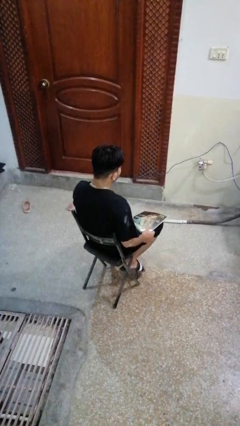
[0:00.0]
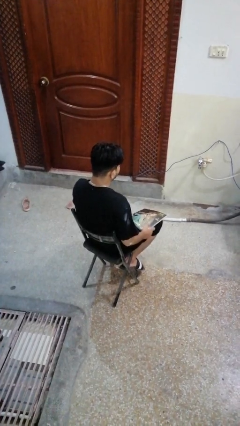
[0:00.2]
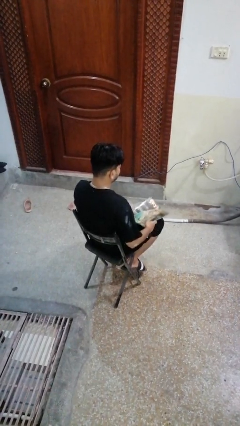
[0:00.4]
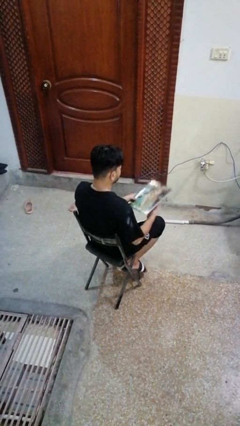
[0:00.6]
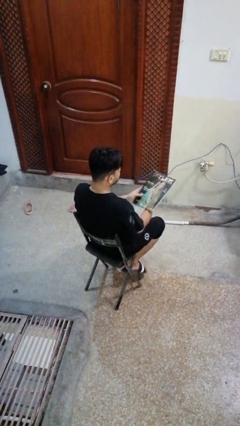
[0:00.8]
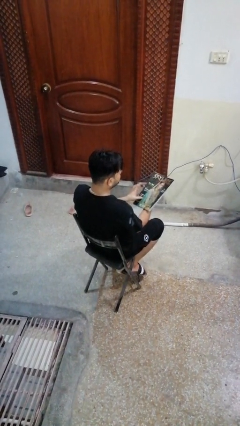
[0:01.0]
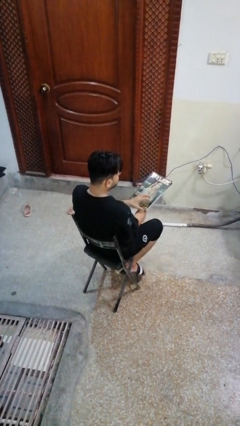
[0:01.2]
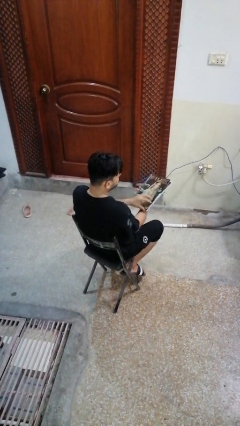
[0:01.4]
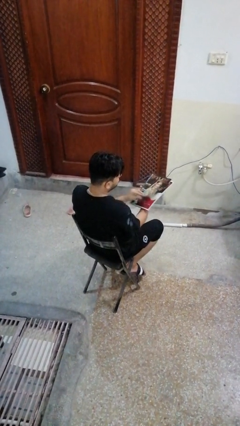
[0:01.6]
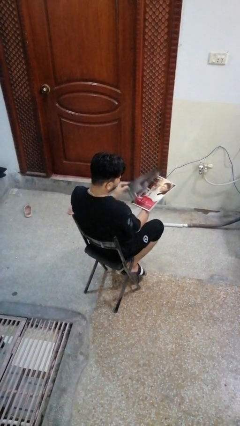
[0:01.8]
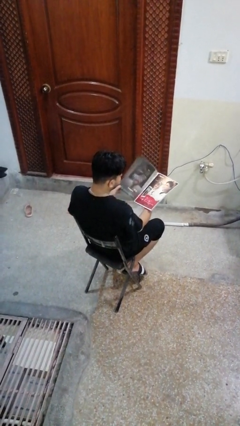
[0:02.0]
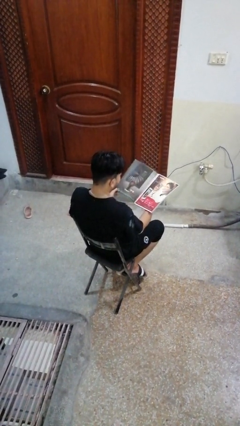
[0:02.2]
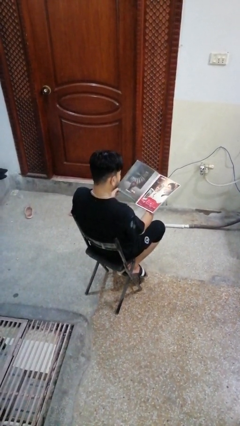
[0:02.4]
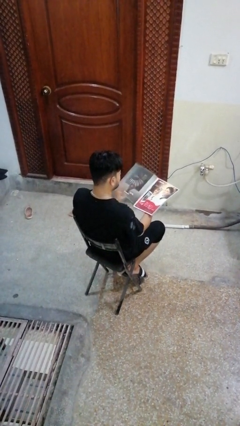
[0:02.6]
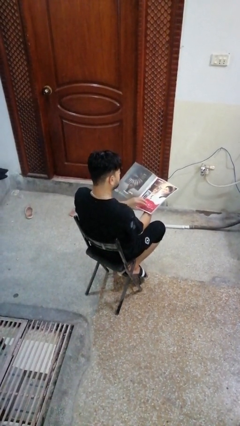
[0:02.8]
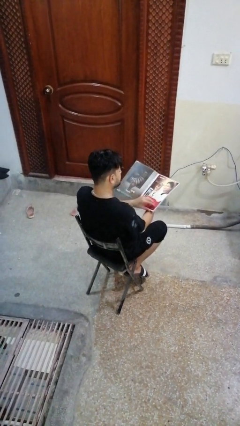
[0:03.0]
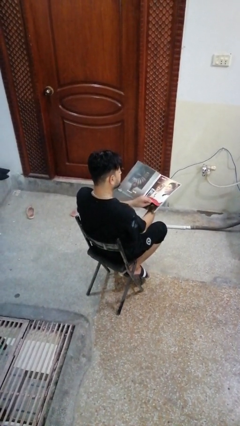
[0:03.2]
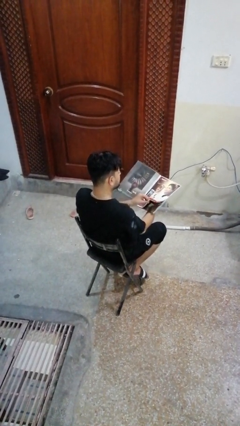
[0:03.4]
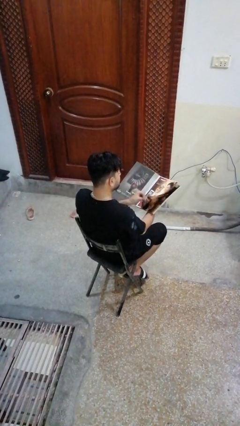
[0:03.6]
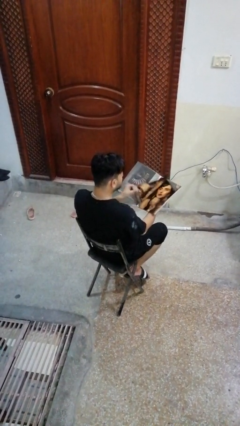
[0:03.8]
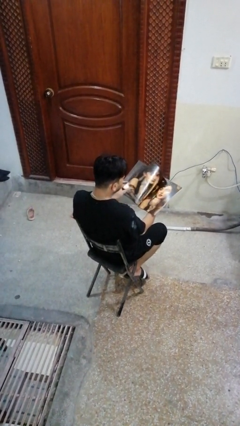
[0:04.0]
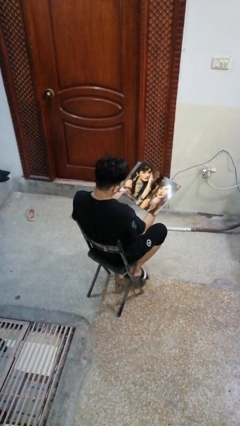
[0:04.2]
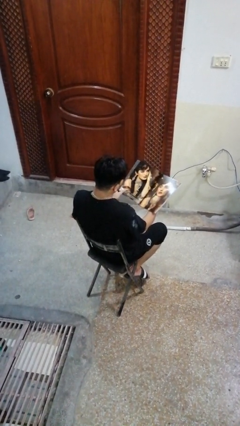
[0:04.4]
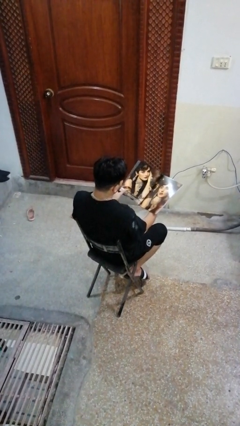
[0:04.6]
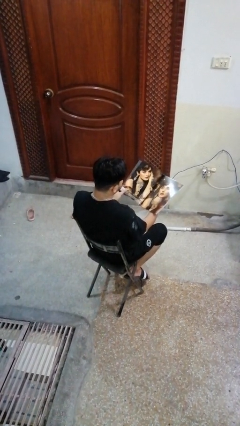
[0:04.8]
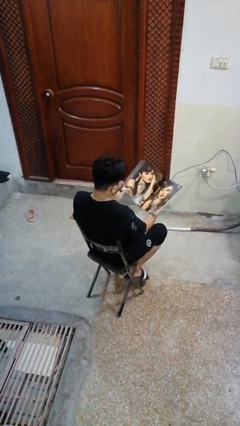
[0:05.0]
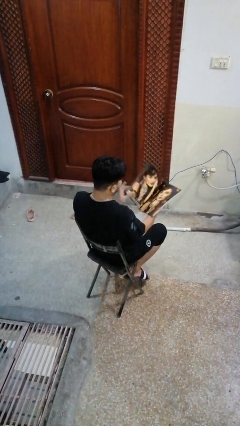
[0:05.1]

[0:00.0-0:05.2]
person reads magazine

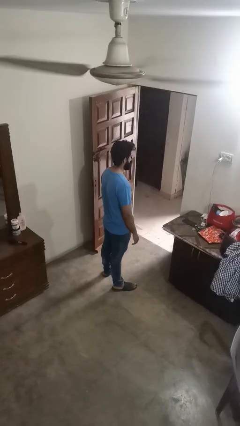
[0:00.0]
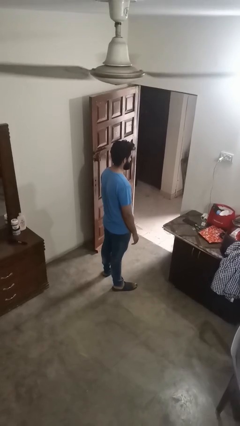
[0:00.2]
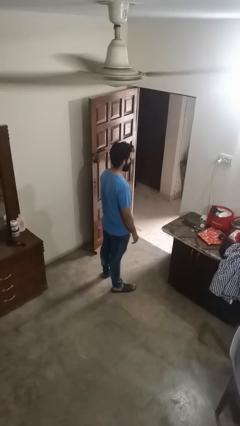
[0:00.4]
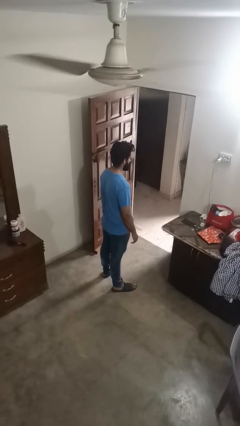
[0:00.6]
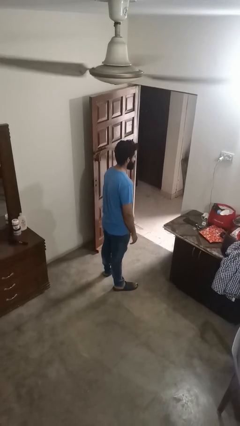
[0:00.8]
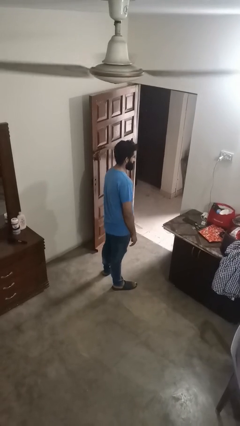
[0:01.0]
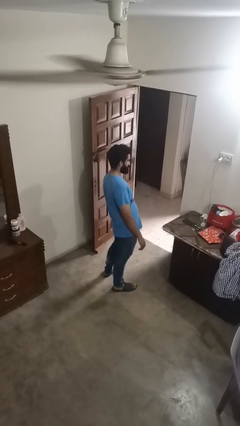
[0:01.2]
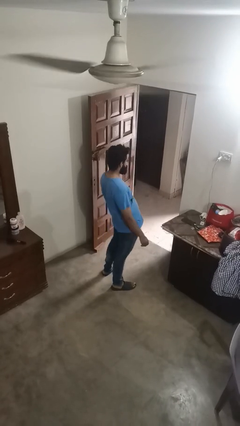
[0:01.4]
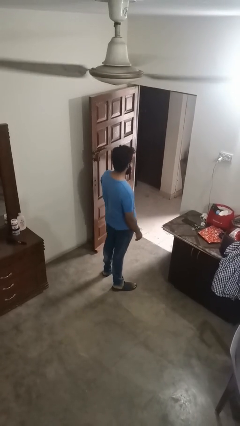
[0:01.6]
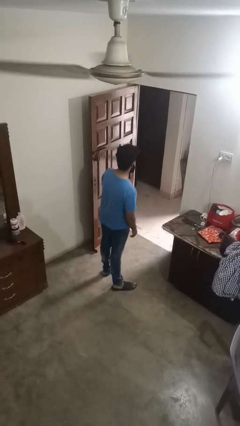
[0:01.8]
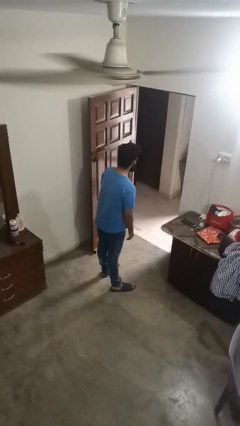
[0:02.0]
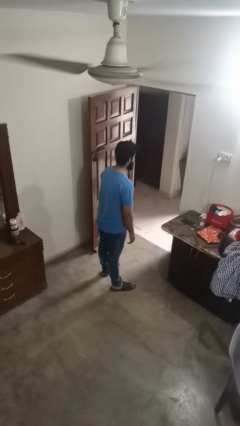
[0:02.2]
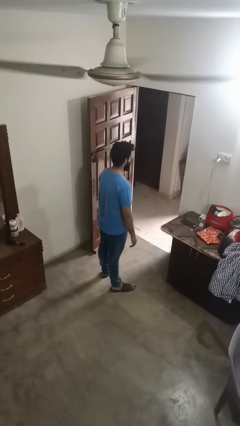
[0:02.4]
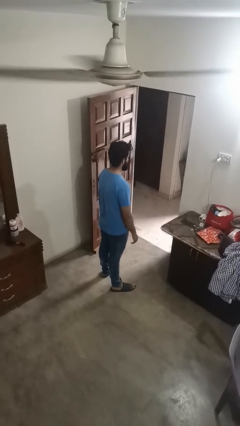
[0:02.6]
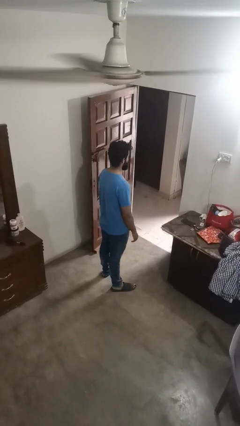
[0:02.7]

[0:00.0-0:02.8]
person wiggles hips

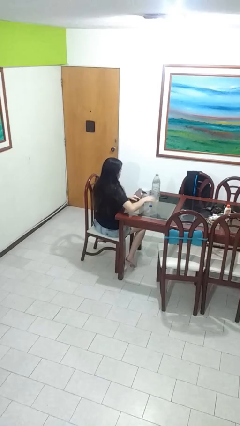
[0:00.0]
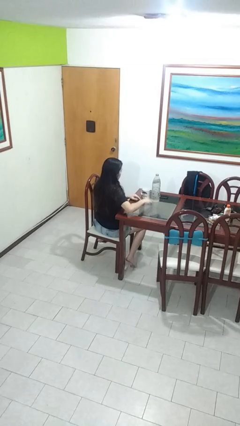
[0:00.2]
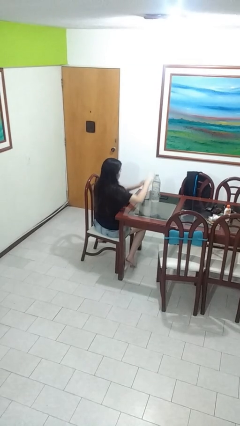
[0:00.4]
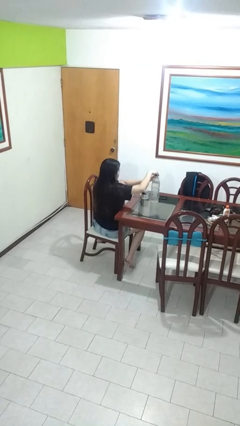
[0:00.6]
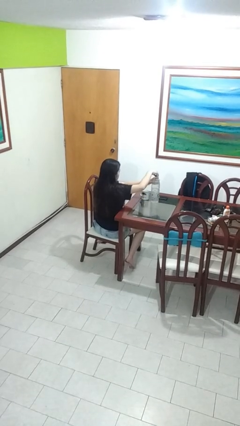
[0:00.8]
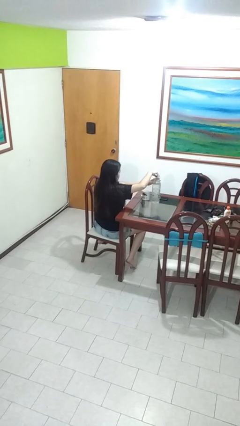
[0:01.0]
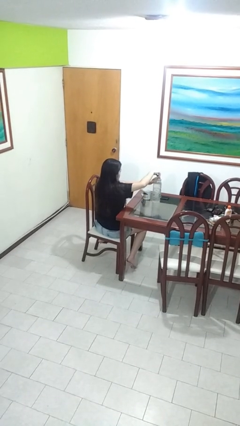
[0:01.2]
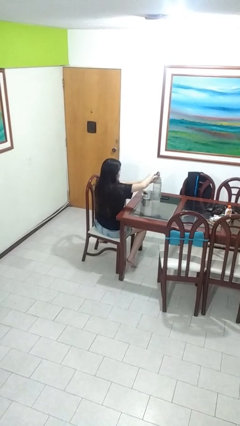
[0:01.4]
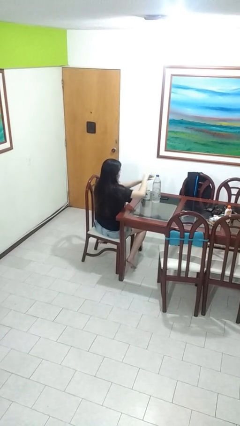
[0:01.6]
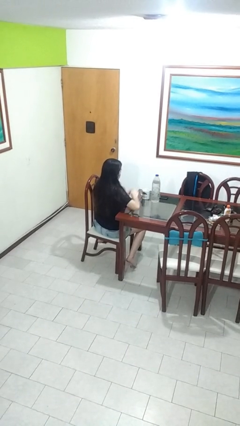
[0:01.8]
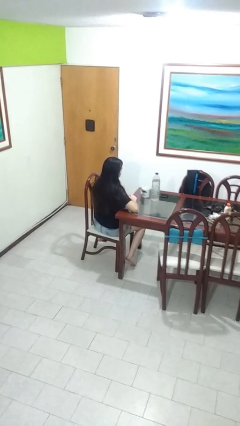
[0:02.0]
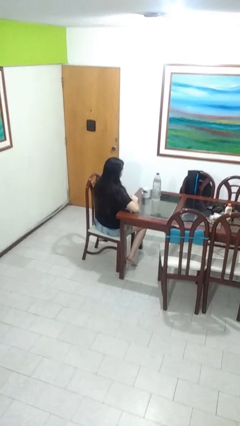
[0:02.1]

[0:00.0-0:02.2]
person screws lid to bottle

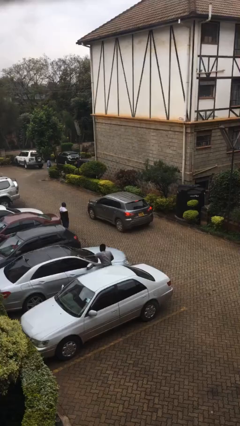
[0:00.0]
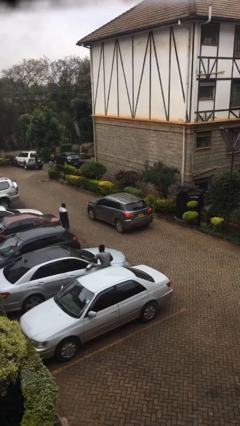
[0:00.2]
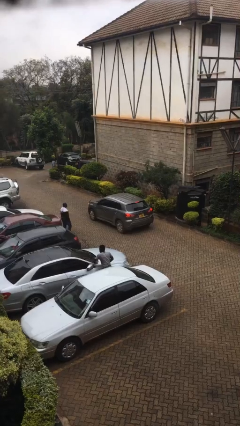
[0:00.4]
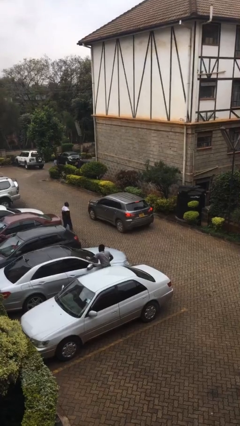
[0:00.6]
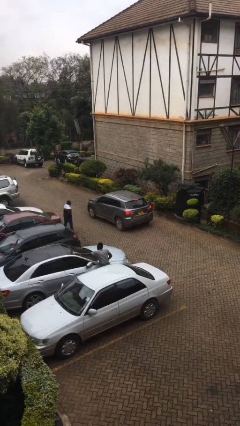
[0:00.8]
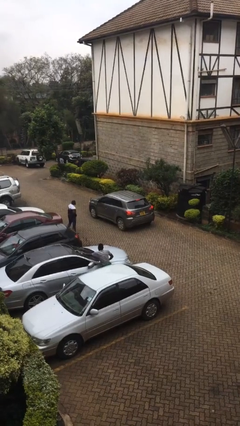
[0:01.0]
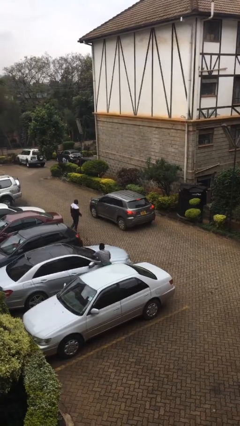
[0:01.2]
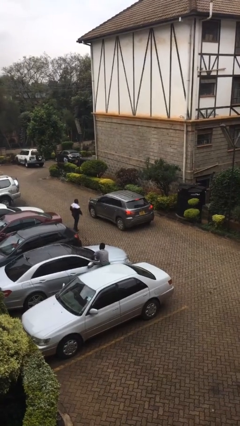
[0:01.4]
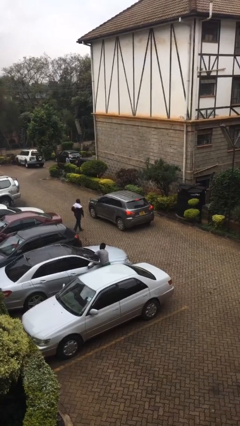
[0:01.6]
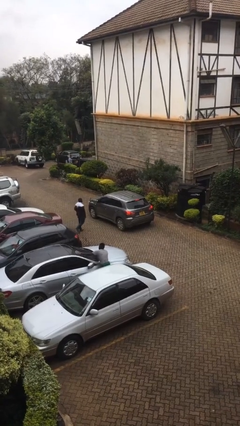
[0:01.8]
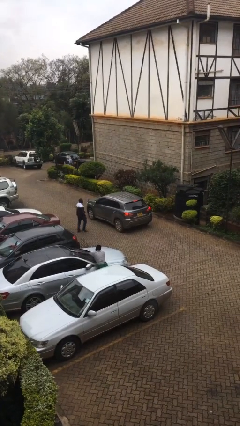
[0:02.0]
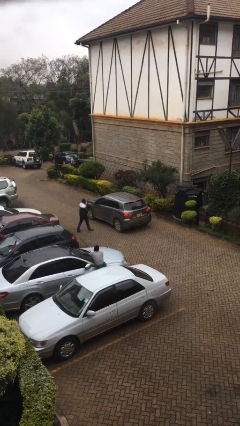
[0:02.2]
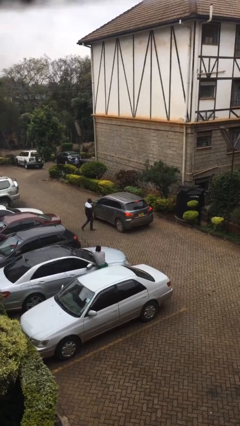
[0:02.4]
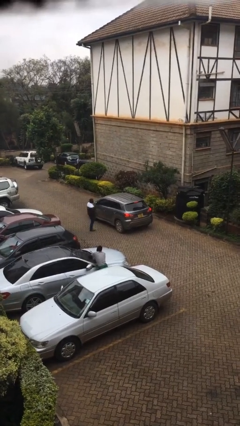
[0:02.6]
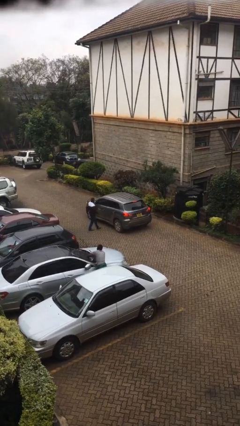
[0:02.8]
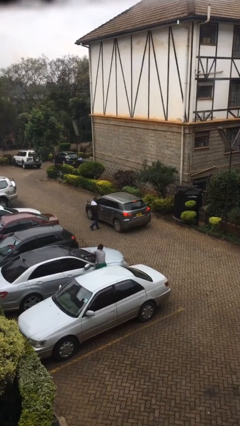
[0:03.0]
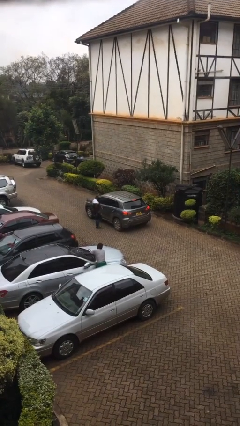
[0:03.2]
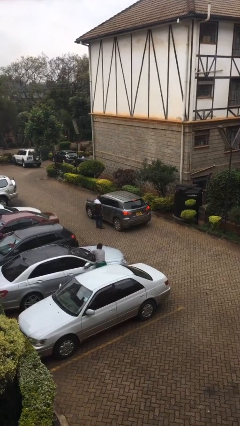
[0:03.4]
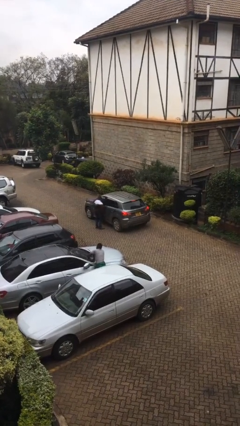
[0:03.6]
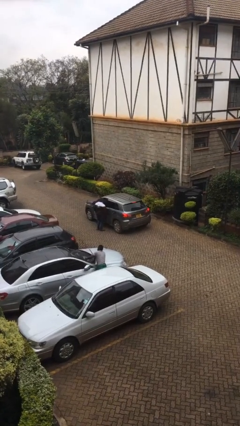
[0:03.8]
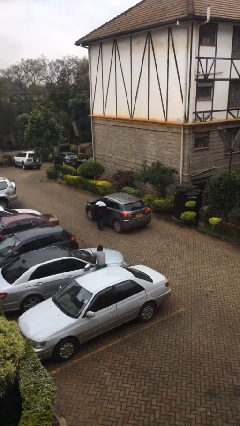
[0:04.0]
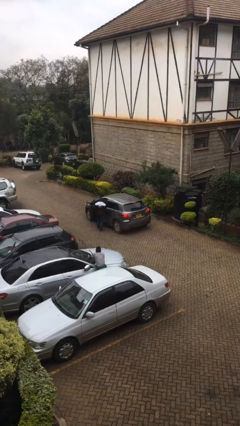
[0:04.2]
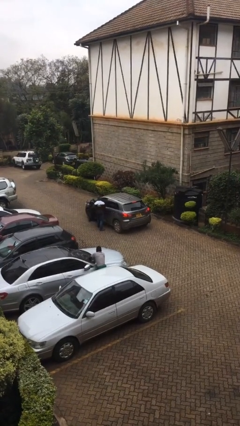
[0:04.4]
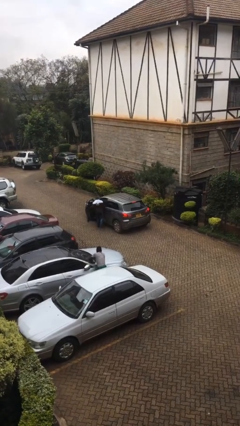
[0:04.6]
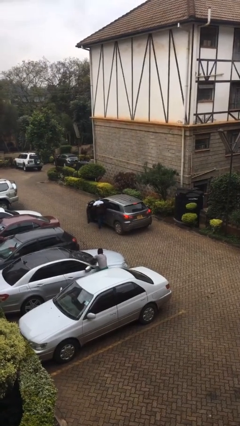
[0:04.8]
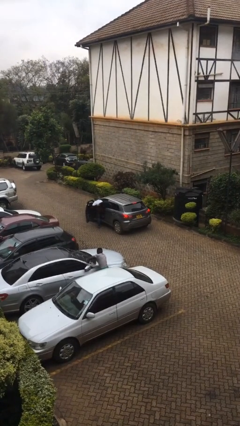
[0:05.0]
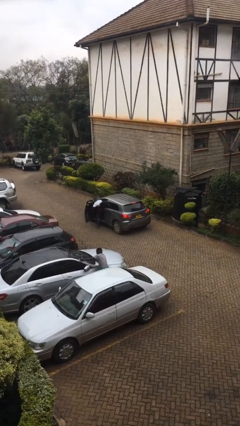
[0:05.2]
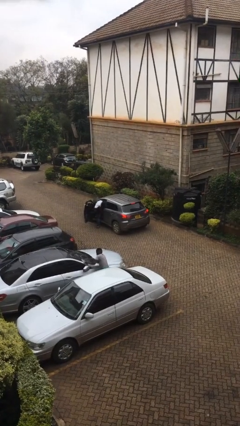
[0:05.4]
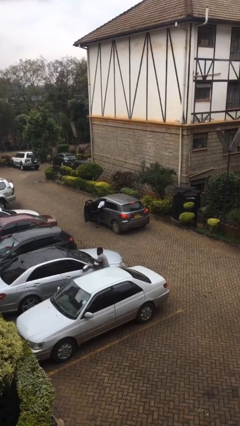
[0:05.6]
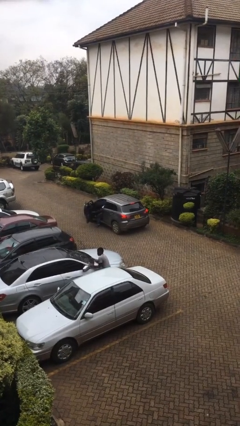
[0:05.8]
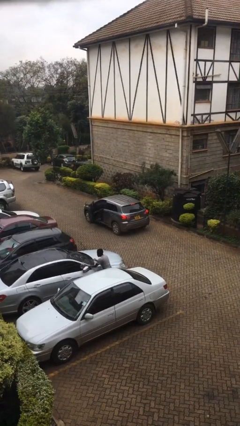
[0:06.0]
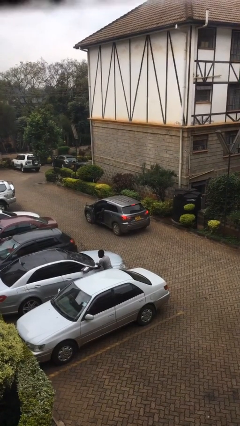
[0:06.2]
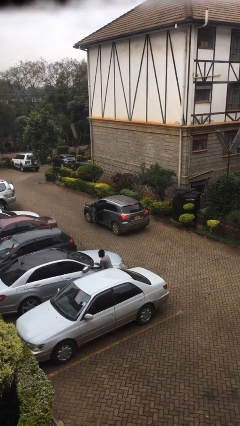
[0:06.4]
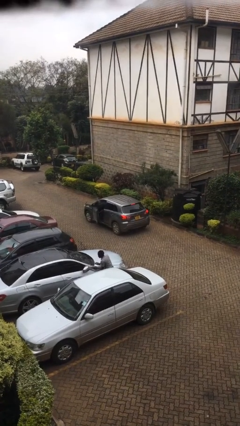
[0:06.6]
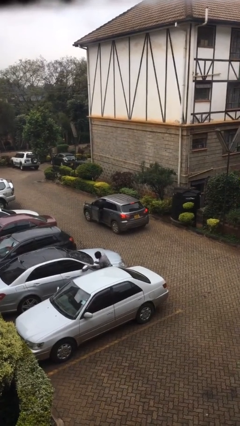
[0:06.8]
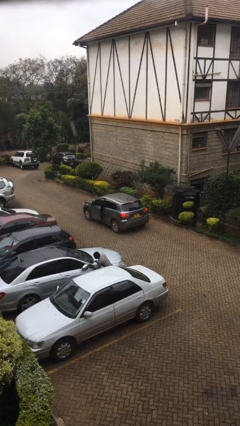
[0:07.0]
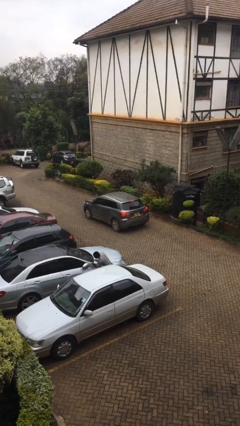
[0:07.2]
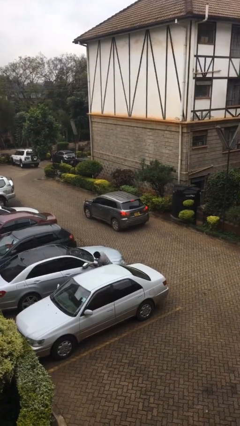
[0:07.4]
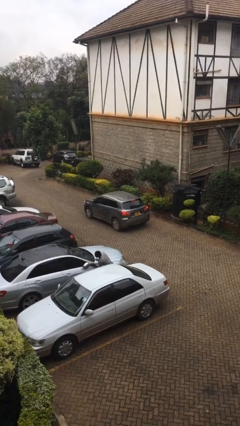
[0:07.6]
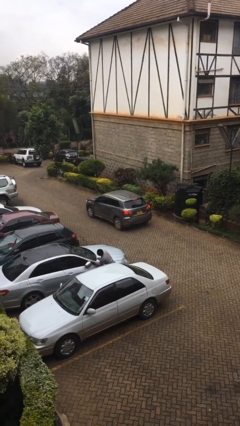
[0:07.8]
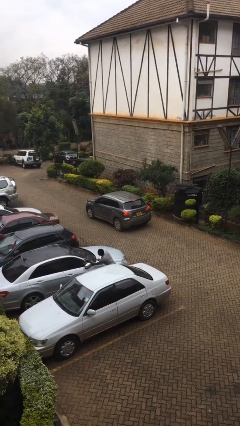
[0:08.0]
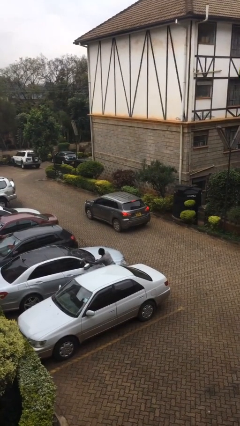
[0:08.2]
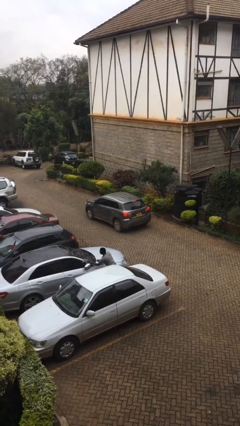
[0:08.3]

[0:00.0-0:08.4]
car picks up person
